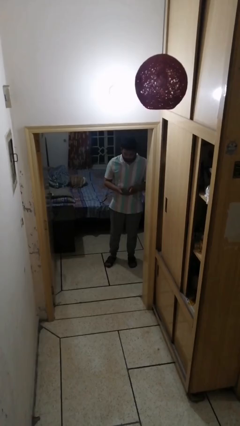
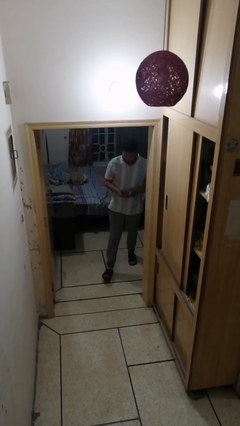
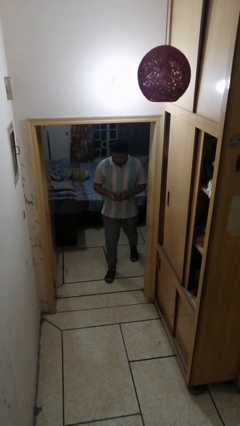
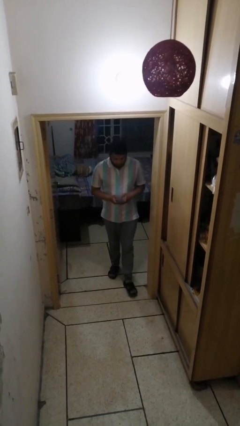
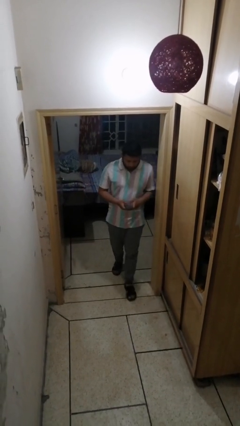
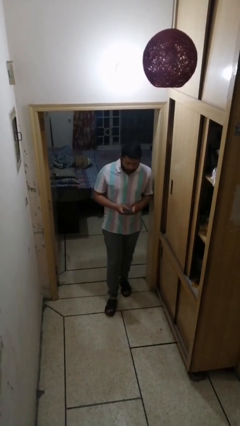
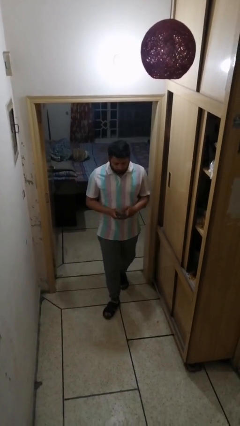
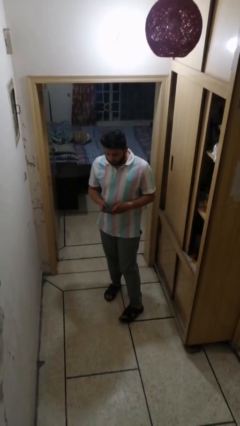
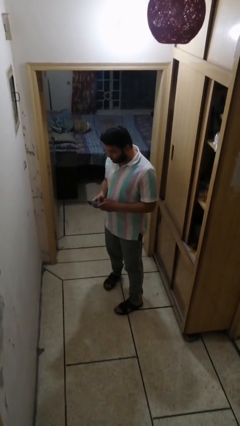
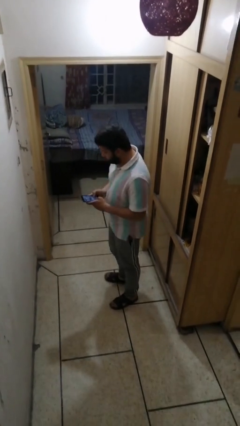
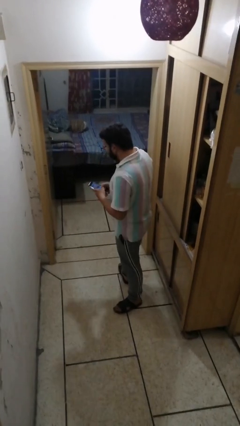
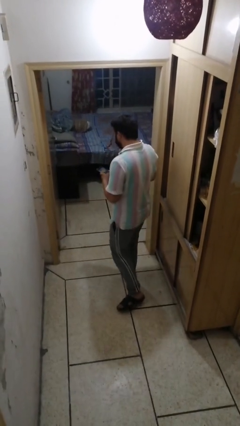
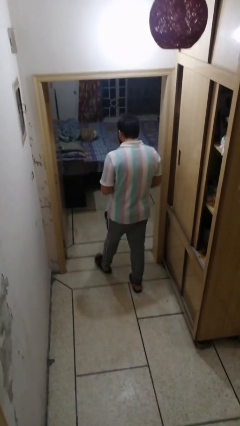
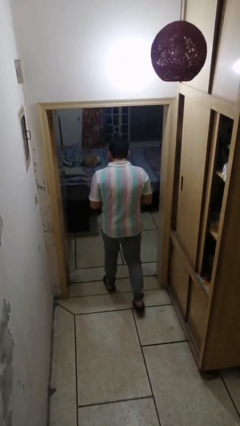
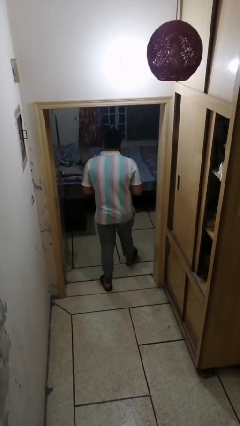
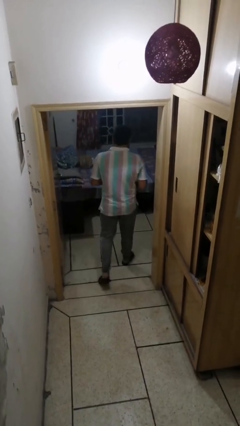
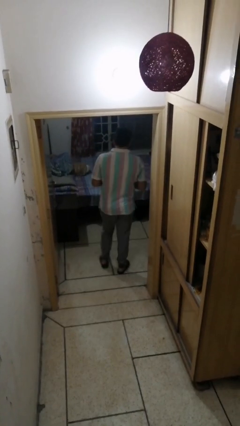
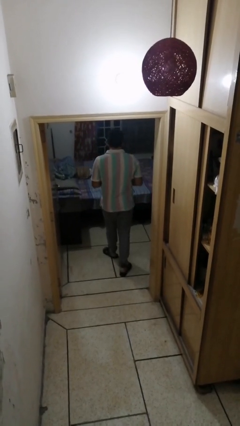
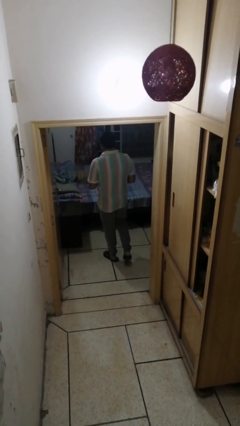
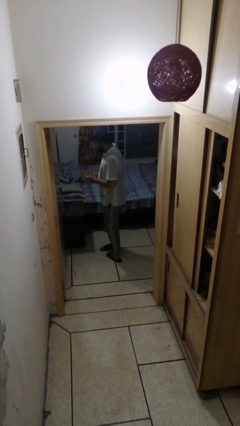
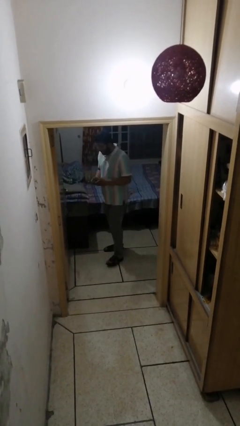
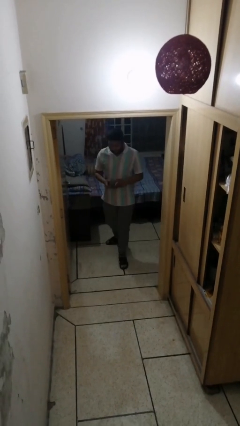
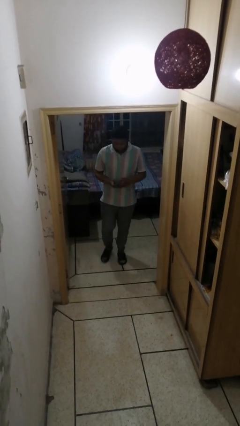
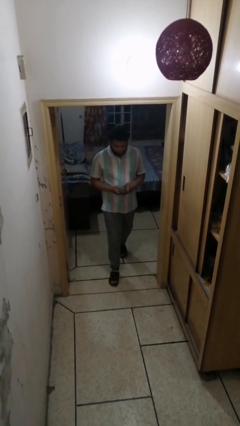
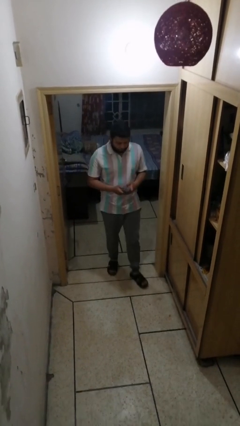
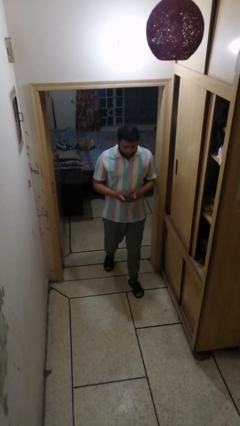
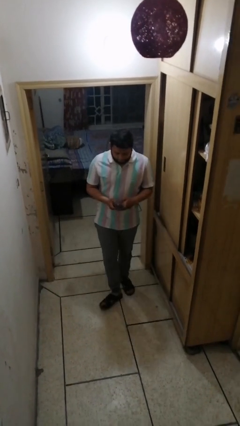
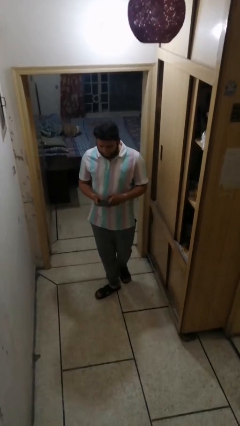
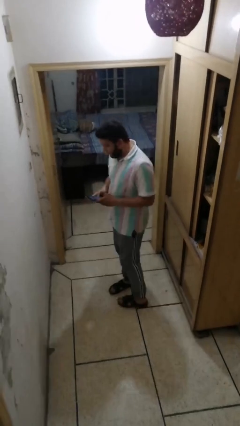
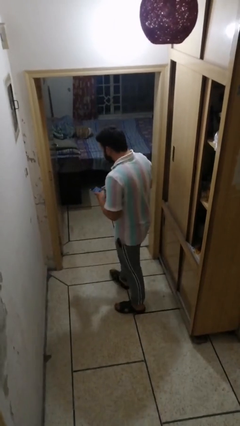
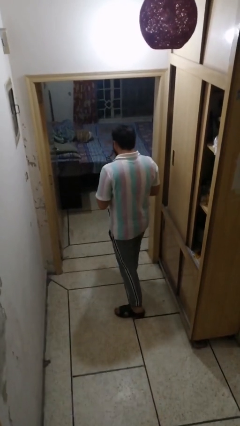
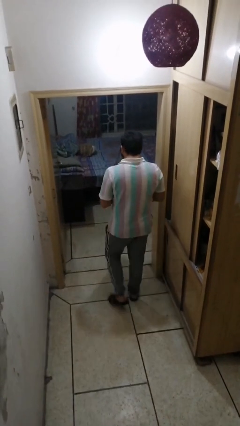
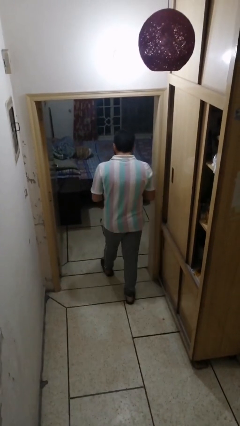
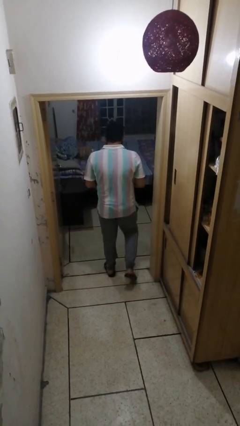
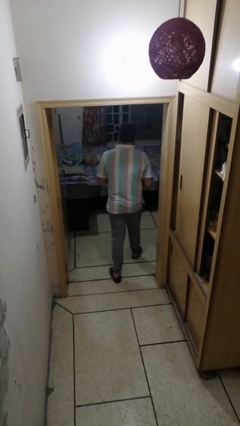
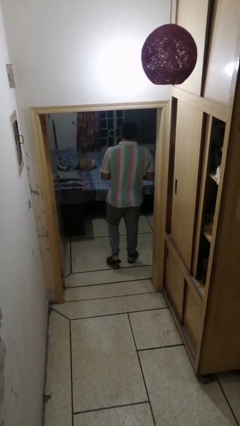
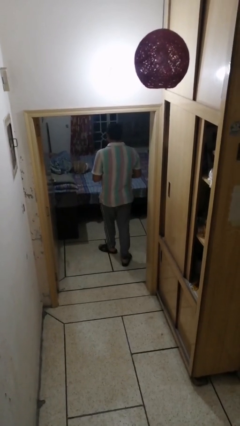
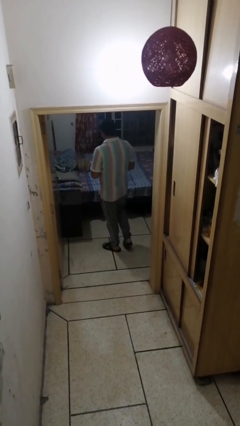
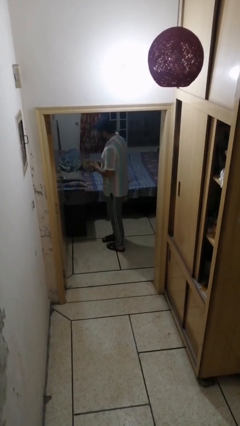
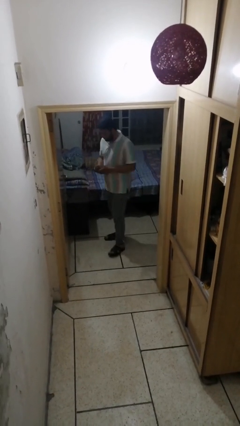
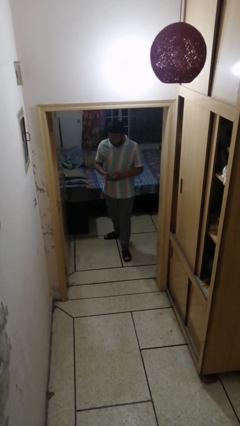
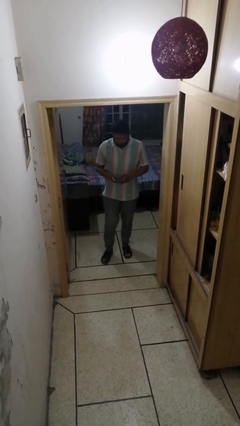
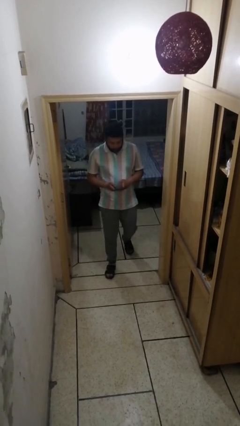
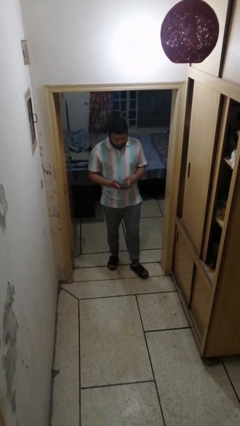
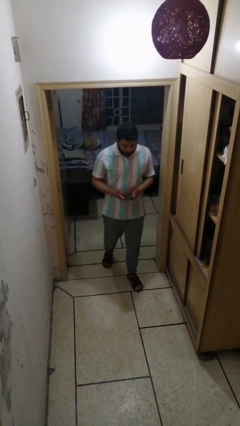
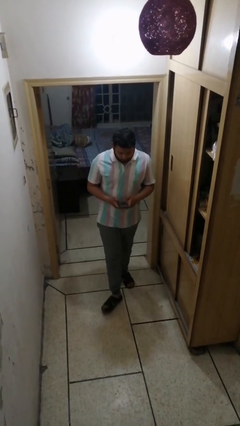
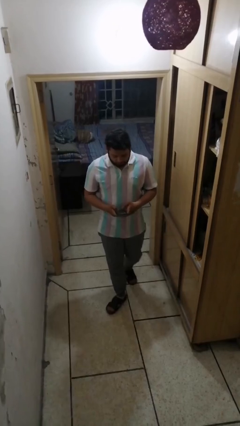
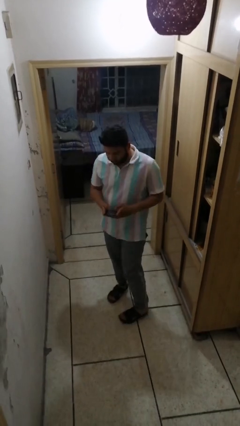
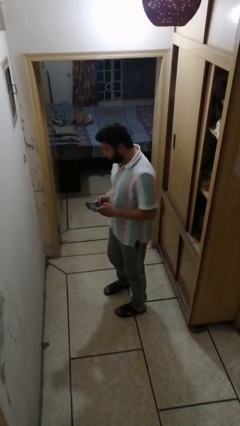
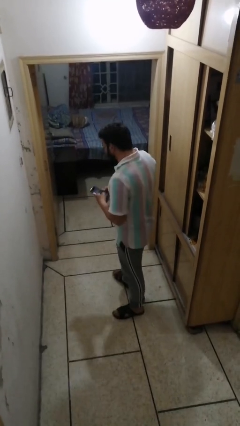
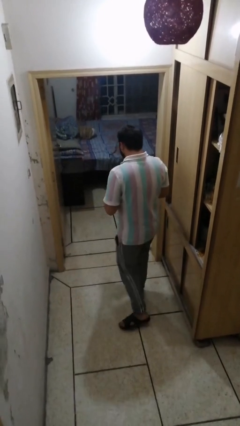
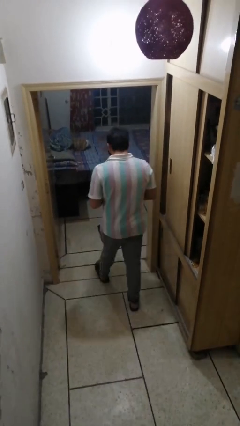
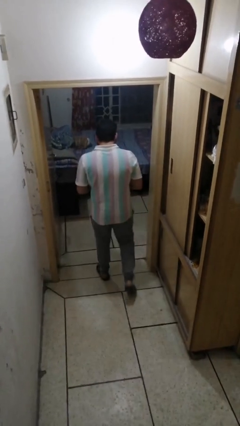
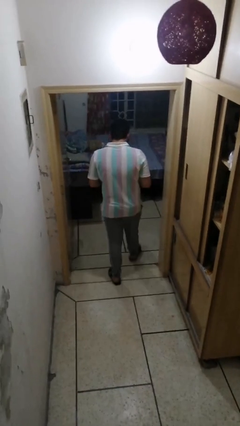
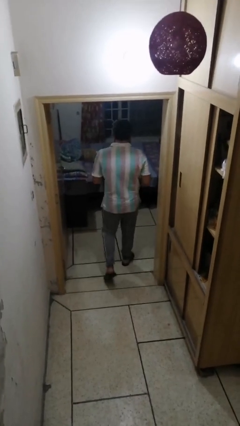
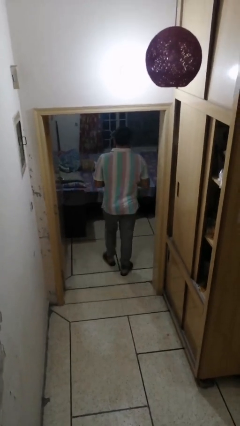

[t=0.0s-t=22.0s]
person texts on phone

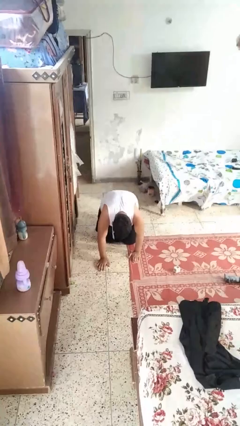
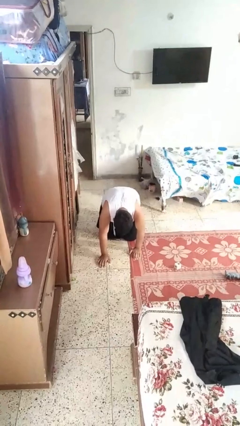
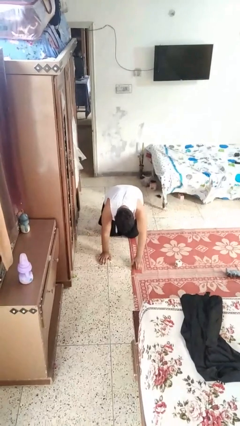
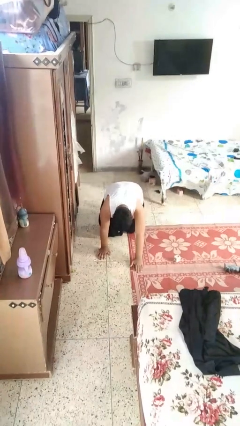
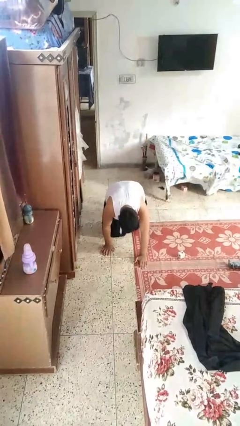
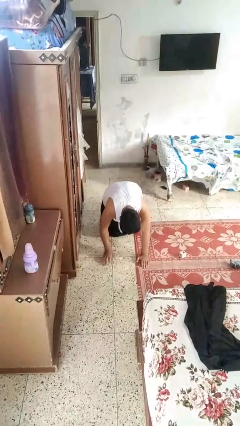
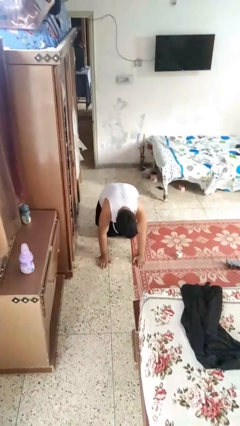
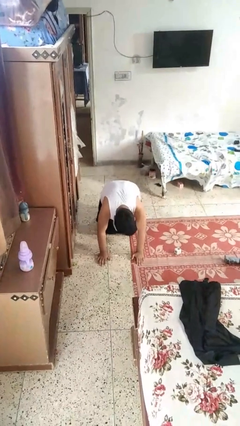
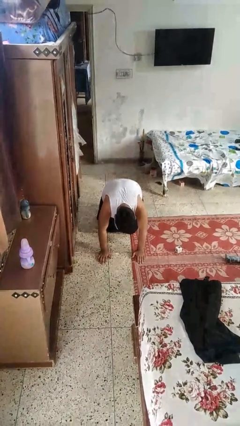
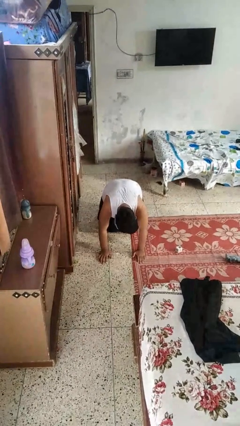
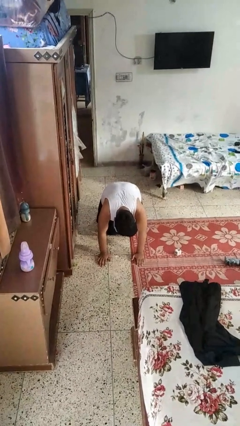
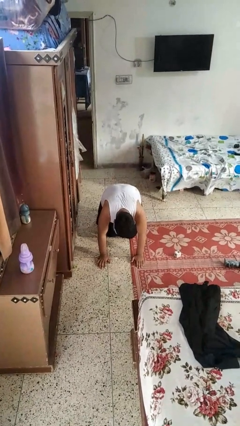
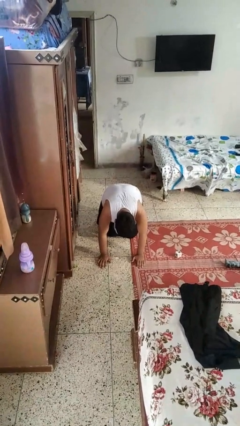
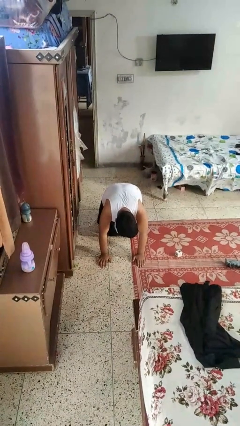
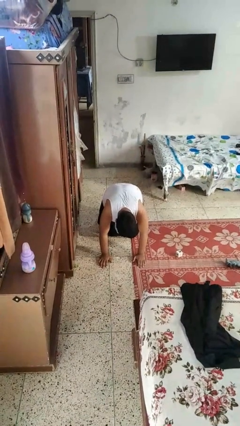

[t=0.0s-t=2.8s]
person crawls

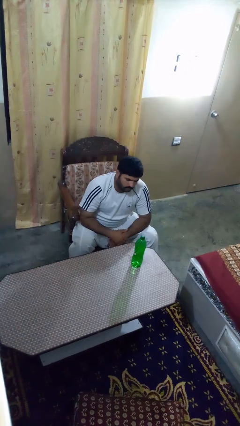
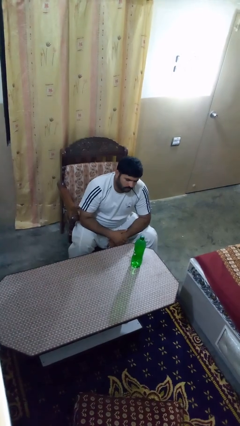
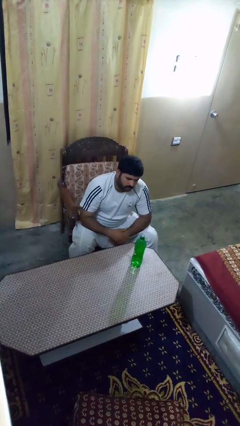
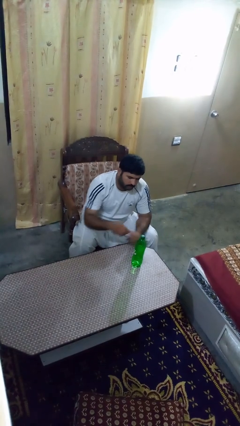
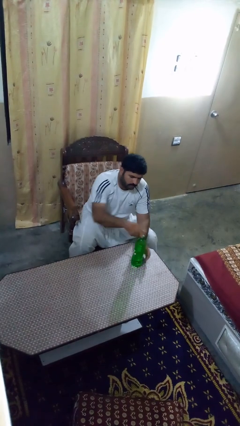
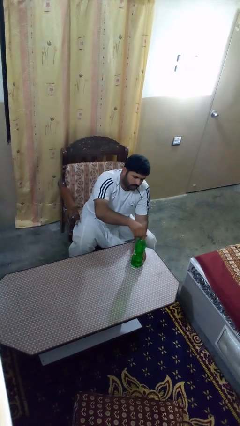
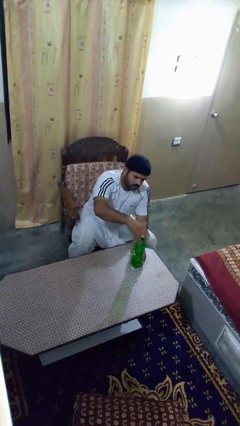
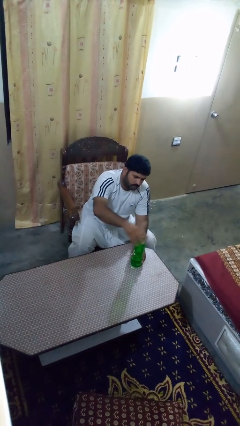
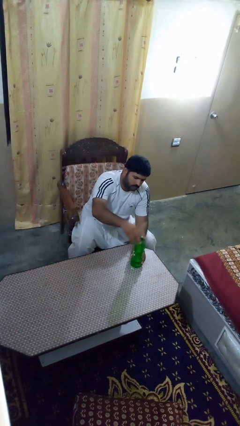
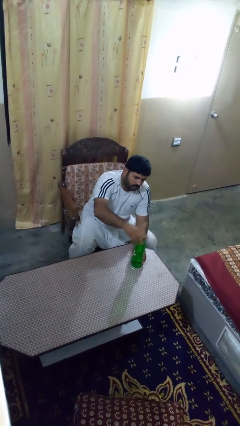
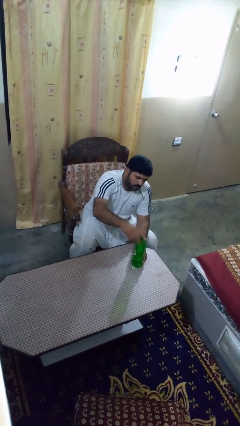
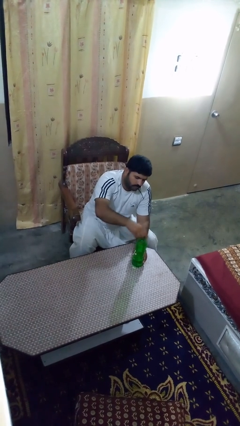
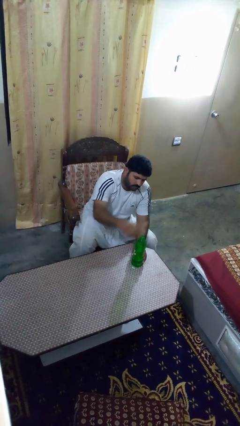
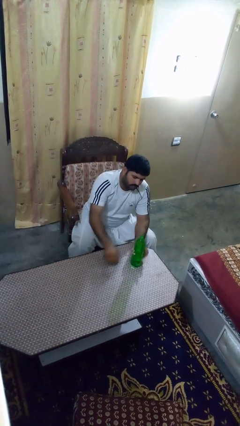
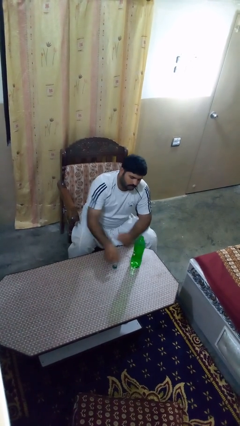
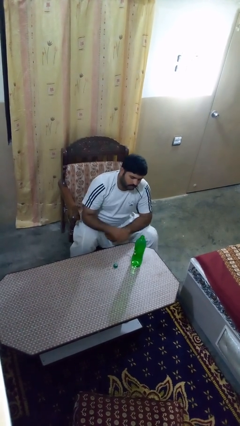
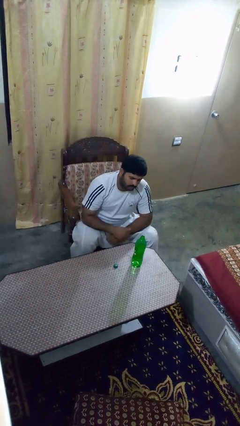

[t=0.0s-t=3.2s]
person unscrews lid from bottle

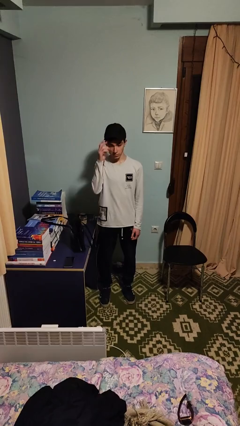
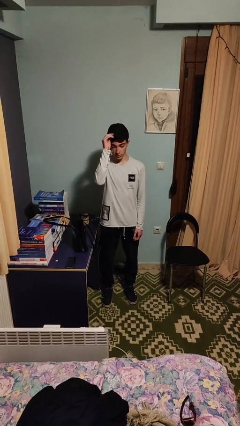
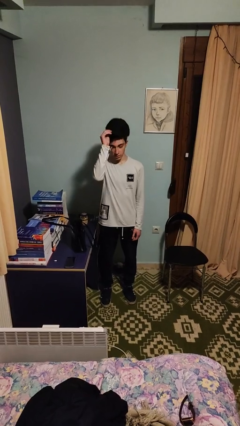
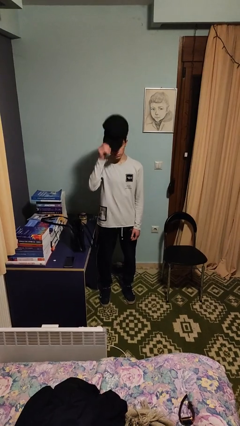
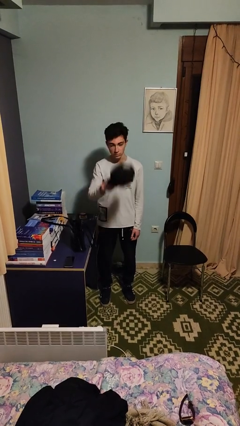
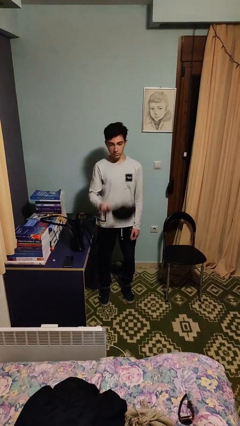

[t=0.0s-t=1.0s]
person takes off hat
